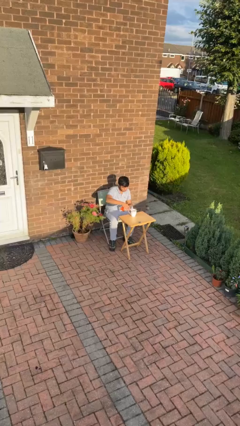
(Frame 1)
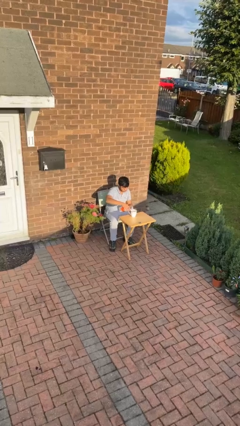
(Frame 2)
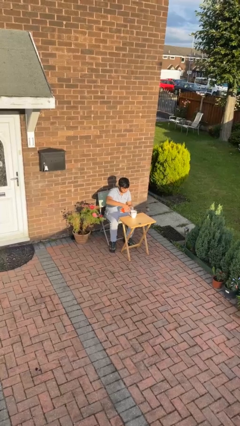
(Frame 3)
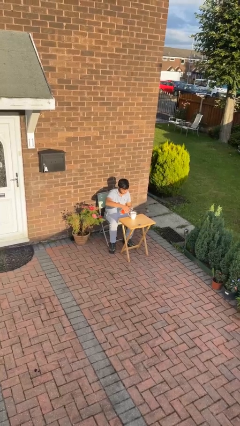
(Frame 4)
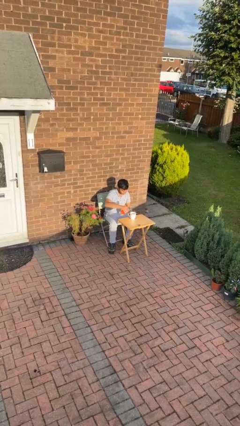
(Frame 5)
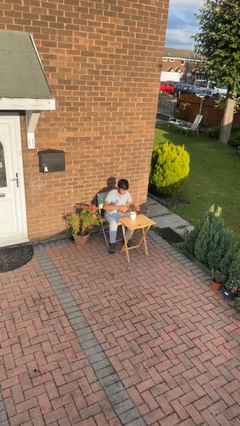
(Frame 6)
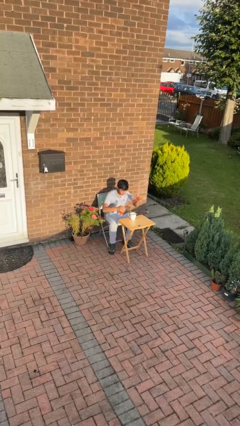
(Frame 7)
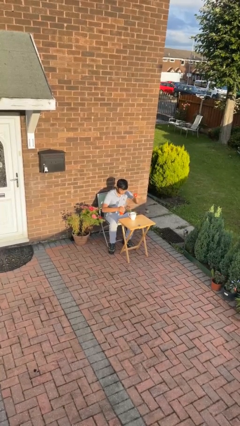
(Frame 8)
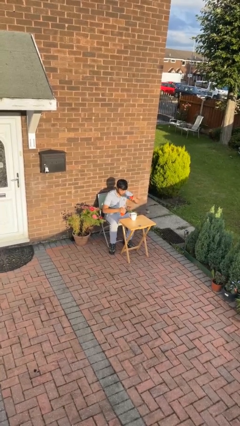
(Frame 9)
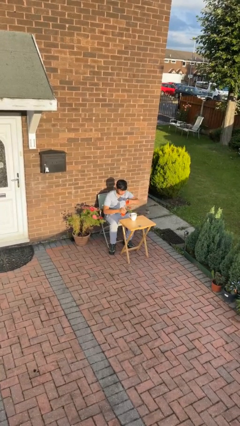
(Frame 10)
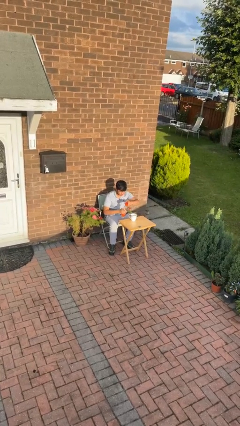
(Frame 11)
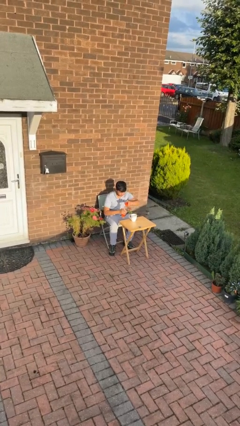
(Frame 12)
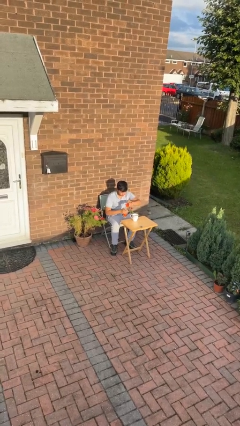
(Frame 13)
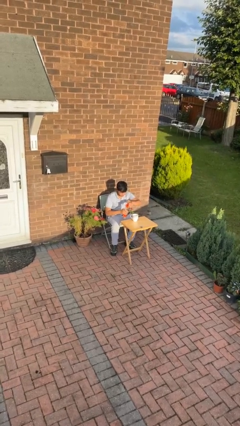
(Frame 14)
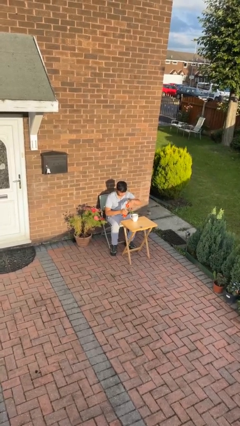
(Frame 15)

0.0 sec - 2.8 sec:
person screws lid to bottle

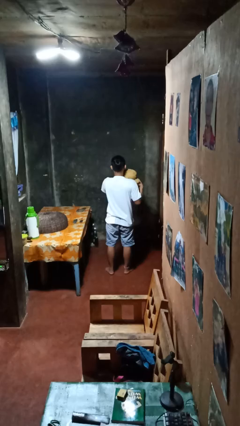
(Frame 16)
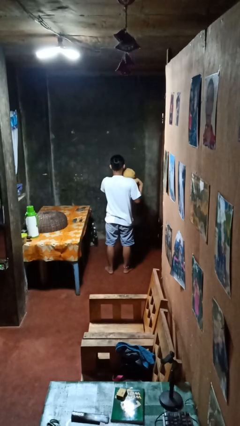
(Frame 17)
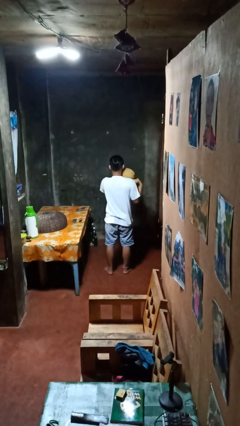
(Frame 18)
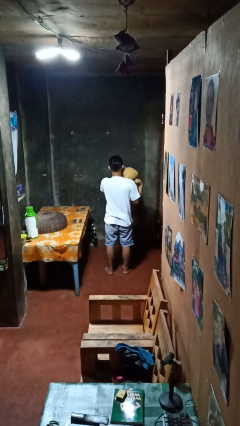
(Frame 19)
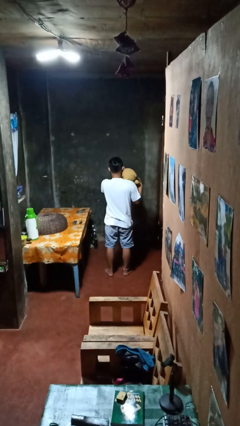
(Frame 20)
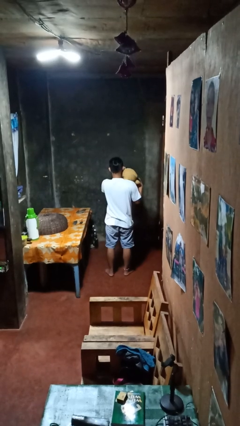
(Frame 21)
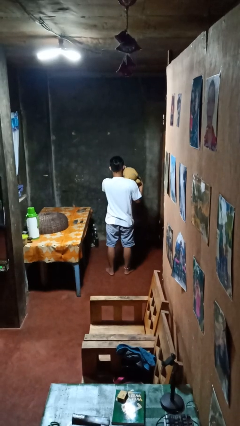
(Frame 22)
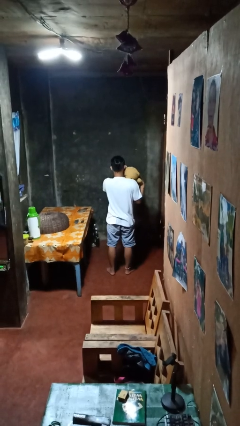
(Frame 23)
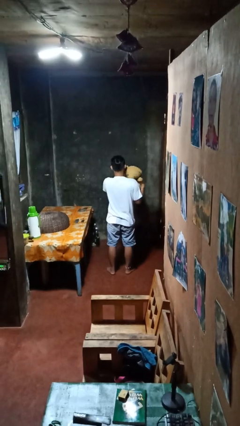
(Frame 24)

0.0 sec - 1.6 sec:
person hugs stuffed animal

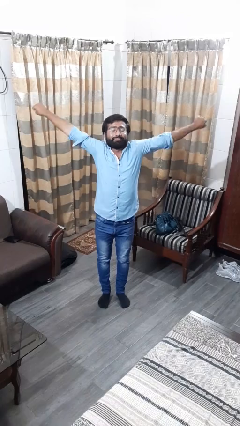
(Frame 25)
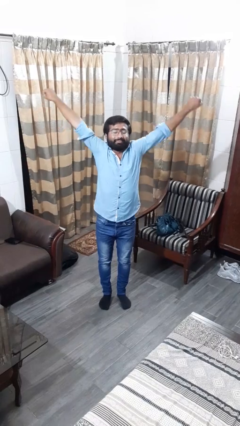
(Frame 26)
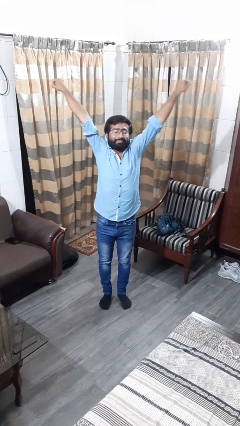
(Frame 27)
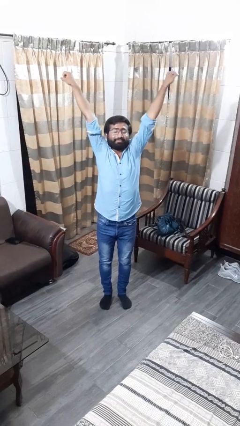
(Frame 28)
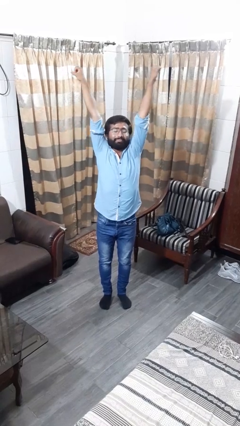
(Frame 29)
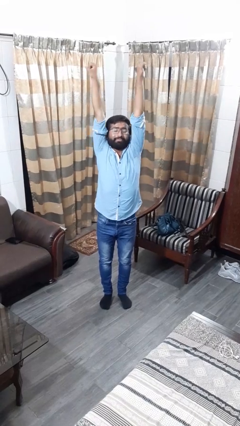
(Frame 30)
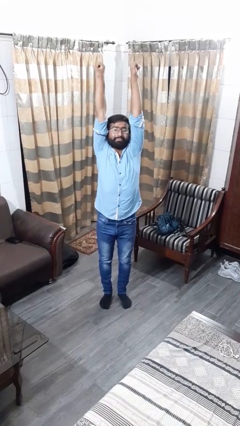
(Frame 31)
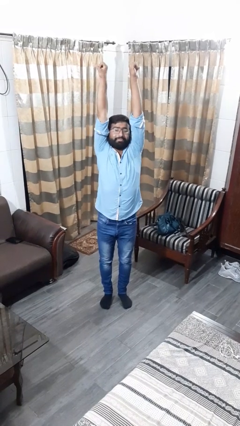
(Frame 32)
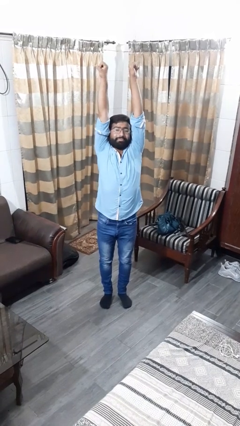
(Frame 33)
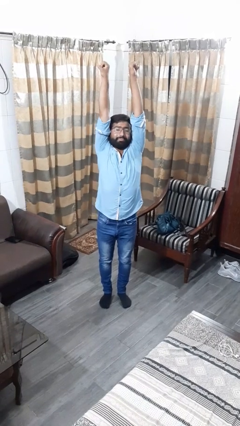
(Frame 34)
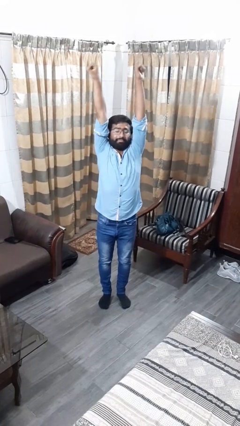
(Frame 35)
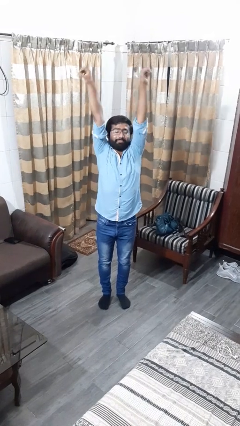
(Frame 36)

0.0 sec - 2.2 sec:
person stretches arms over head

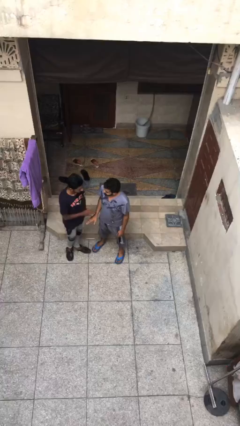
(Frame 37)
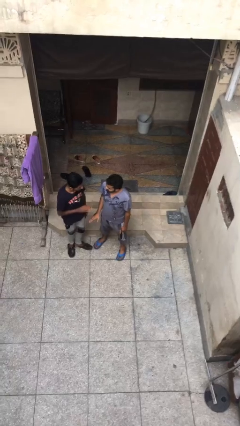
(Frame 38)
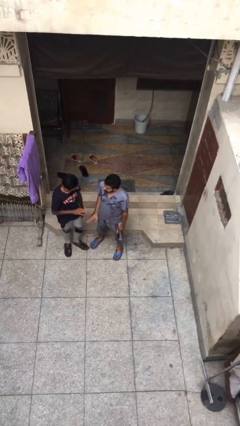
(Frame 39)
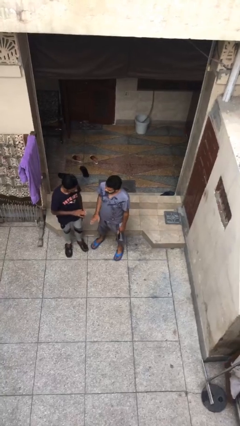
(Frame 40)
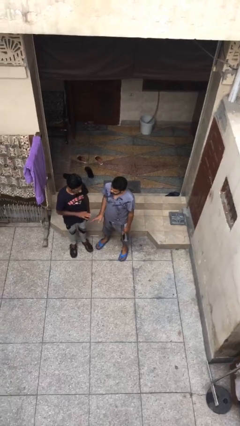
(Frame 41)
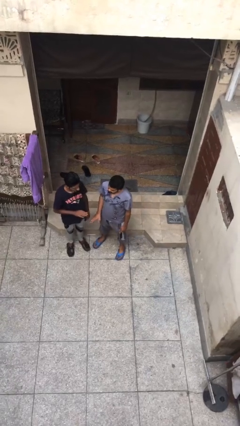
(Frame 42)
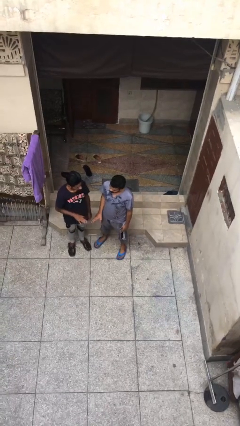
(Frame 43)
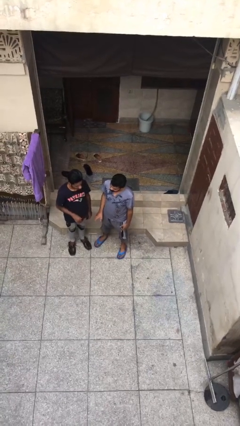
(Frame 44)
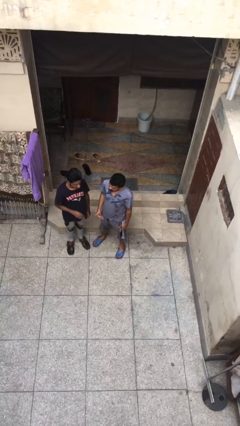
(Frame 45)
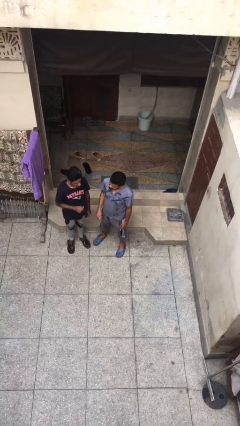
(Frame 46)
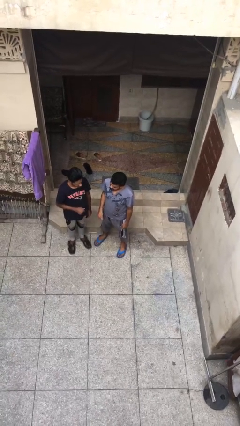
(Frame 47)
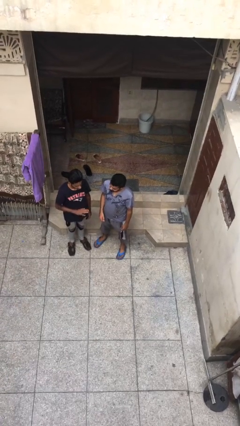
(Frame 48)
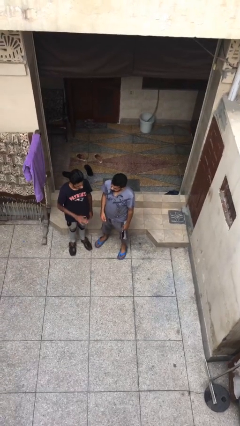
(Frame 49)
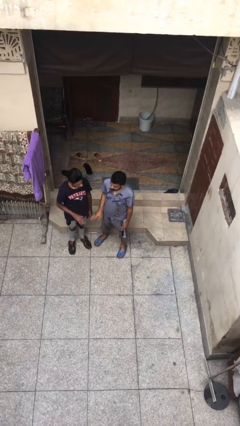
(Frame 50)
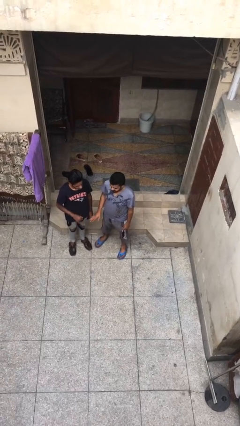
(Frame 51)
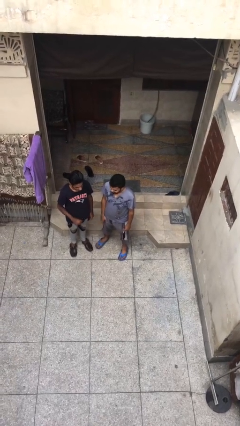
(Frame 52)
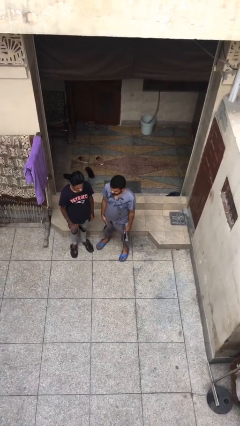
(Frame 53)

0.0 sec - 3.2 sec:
person talks to person

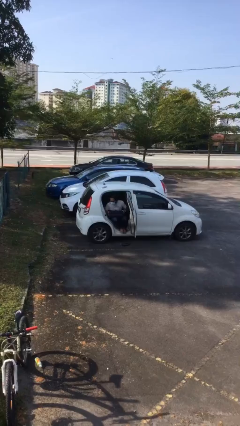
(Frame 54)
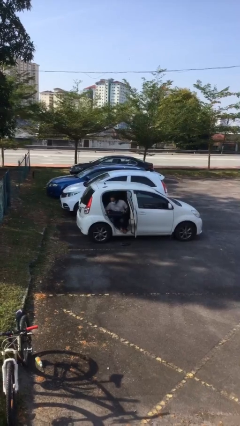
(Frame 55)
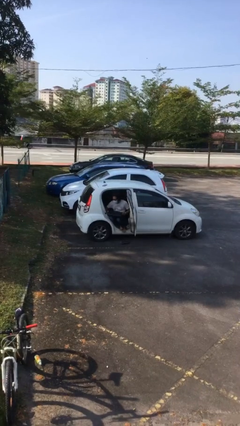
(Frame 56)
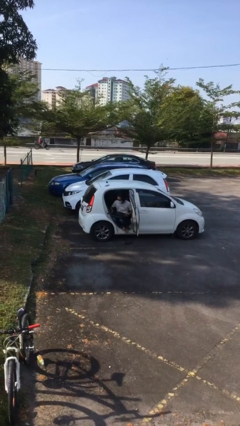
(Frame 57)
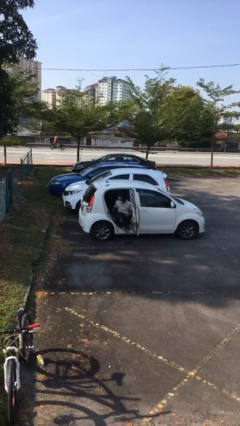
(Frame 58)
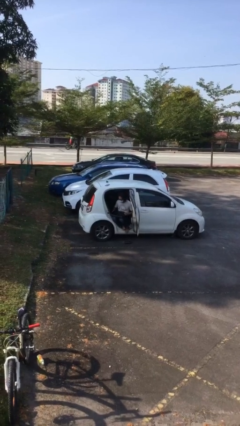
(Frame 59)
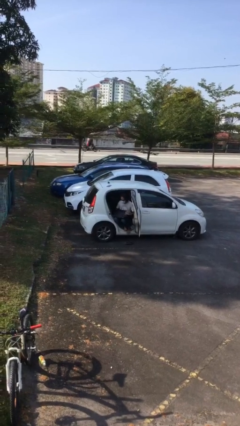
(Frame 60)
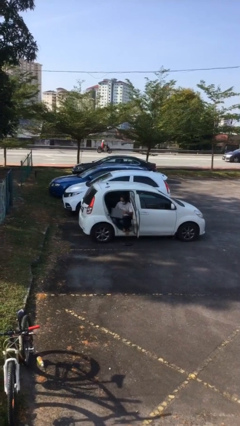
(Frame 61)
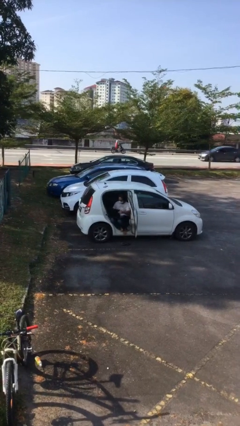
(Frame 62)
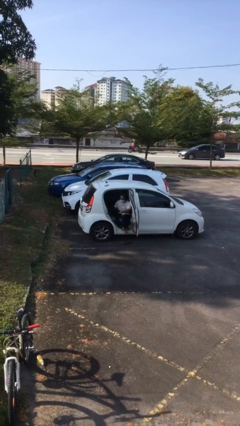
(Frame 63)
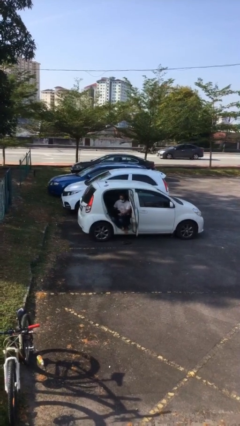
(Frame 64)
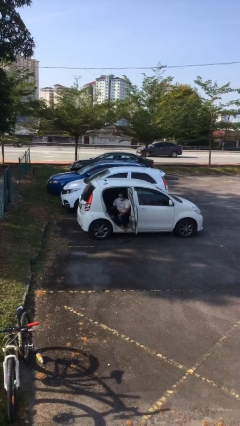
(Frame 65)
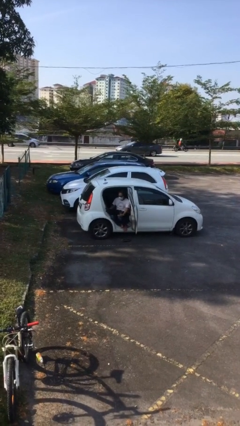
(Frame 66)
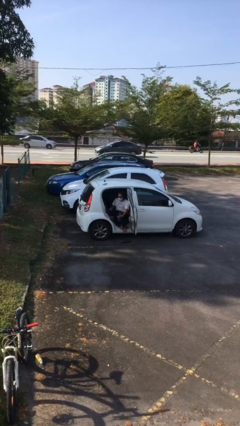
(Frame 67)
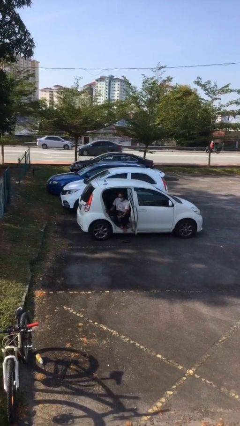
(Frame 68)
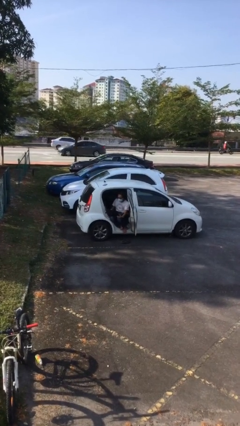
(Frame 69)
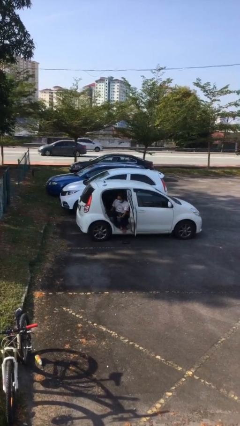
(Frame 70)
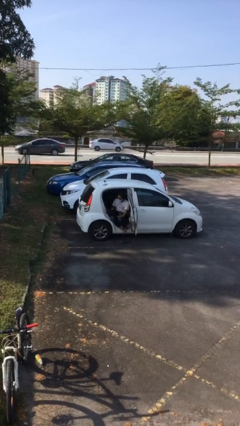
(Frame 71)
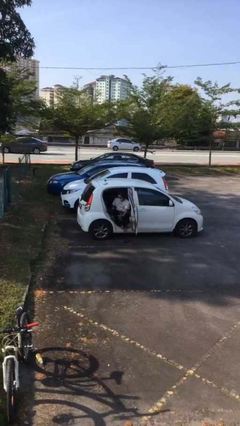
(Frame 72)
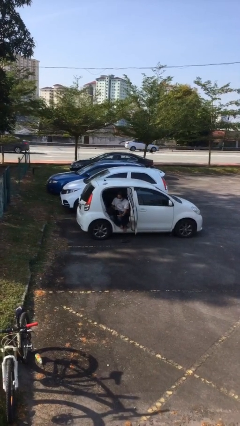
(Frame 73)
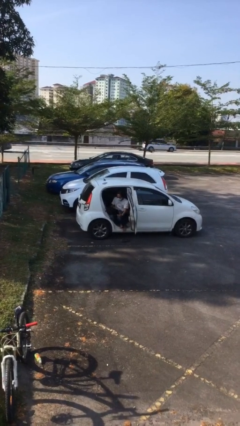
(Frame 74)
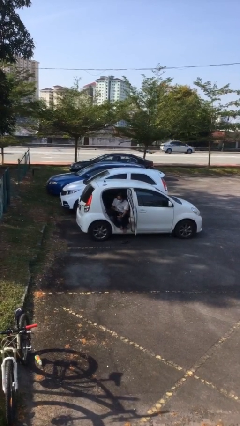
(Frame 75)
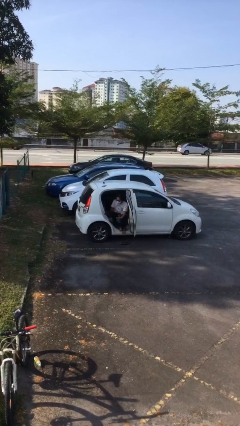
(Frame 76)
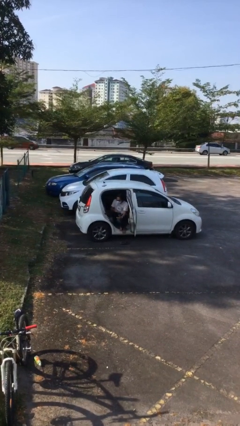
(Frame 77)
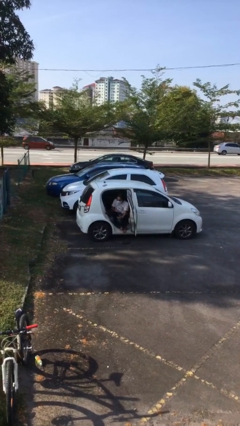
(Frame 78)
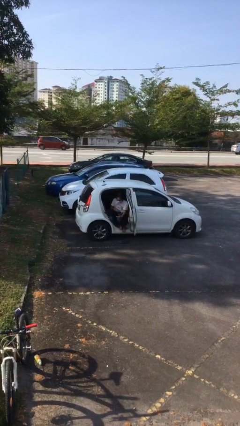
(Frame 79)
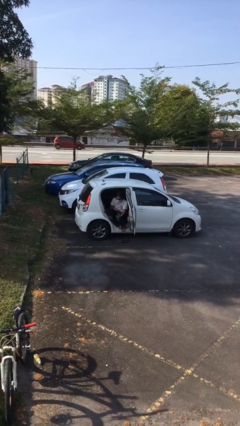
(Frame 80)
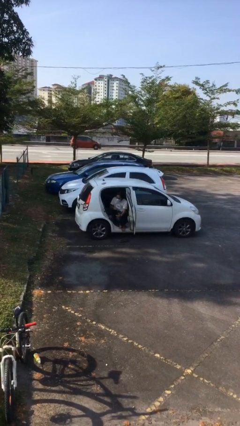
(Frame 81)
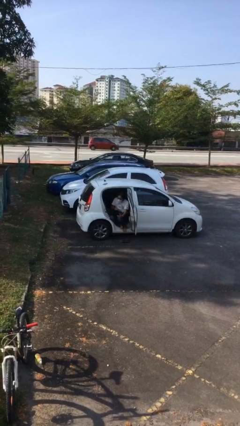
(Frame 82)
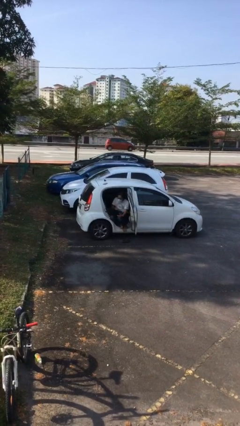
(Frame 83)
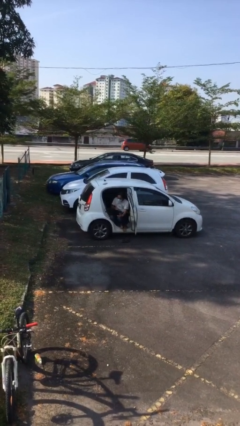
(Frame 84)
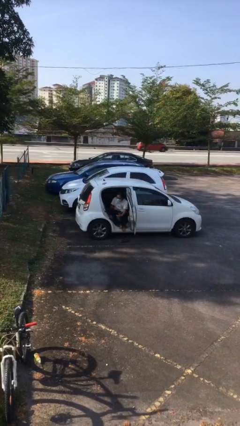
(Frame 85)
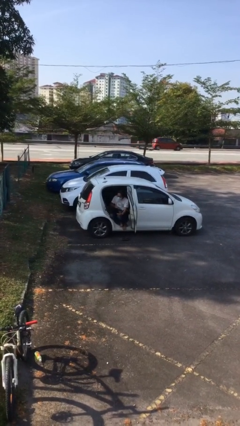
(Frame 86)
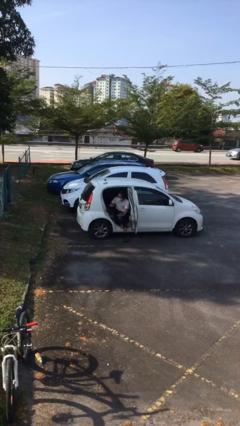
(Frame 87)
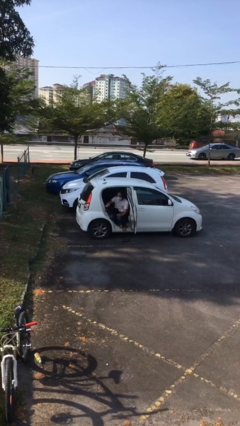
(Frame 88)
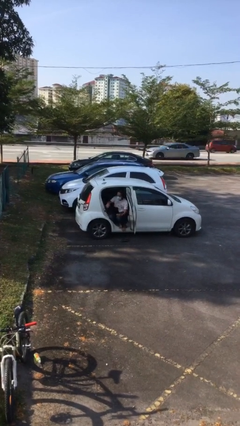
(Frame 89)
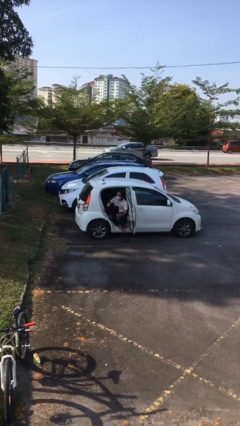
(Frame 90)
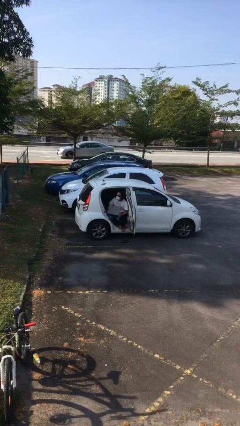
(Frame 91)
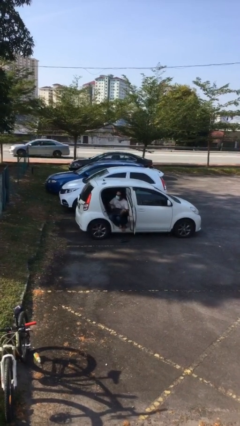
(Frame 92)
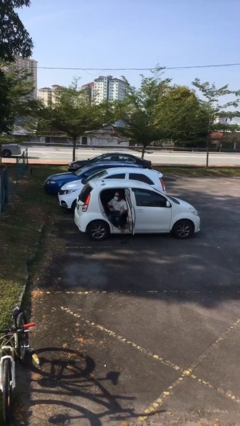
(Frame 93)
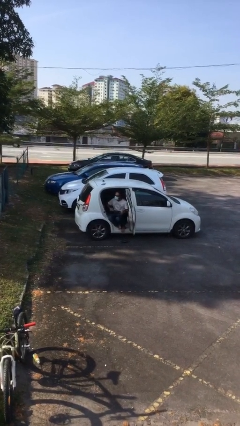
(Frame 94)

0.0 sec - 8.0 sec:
person interacts with laptop
